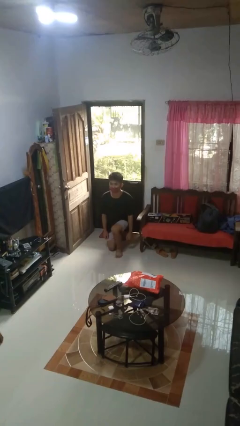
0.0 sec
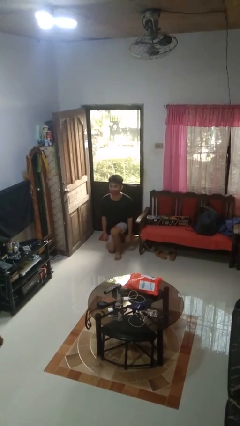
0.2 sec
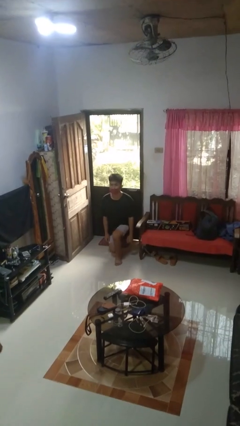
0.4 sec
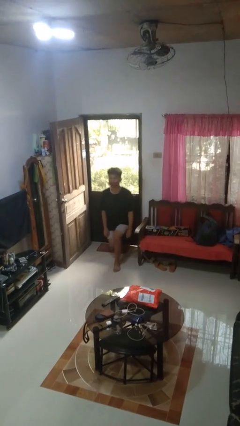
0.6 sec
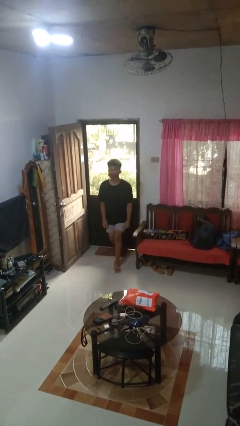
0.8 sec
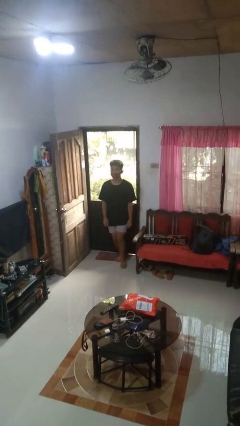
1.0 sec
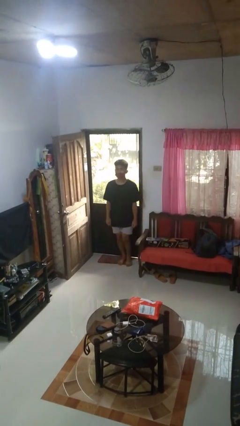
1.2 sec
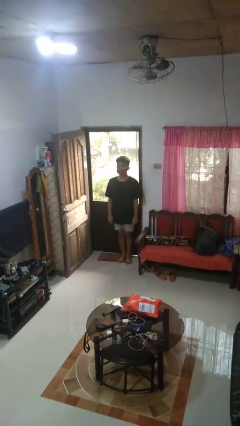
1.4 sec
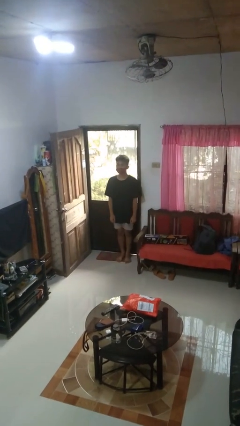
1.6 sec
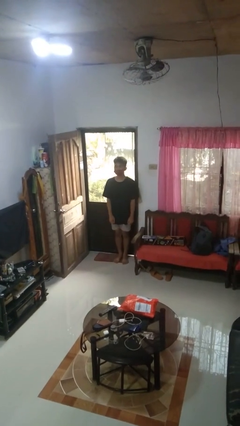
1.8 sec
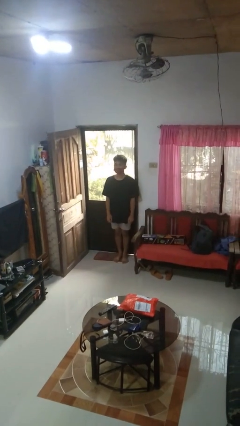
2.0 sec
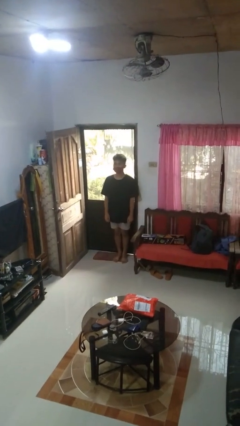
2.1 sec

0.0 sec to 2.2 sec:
person stands up from floor

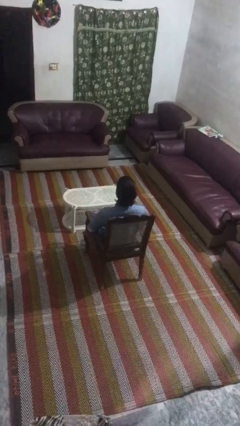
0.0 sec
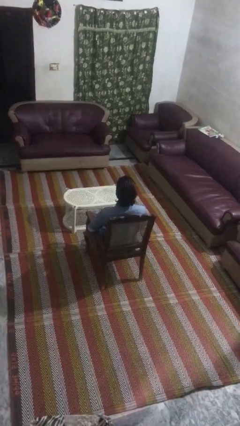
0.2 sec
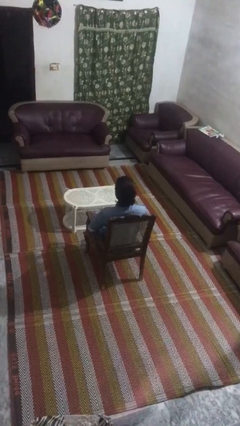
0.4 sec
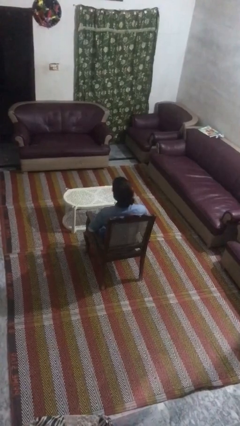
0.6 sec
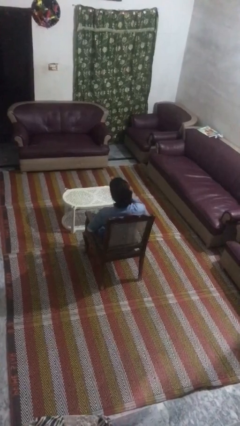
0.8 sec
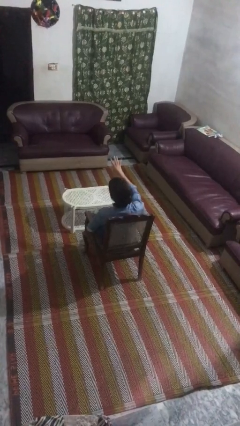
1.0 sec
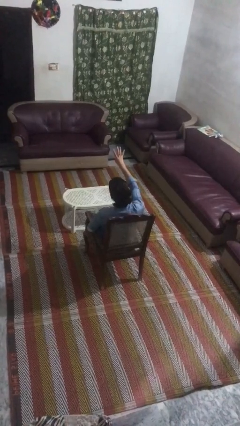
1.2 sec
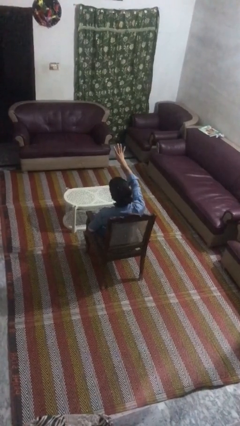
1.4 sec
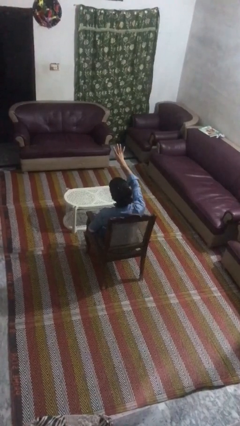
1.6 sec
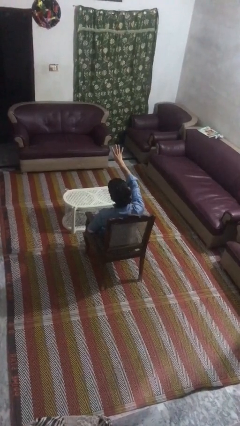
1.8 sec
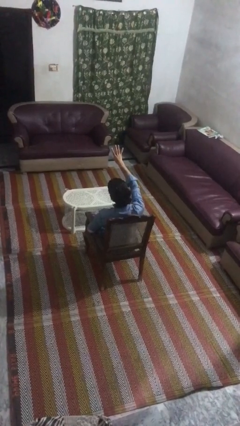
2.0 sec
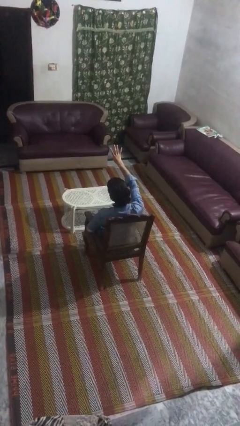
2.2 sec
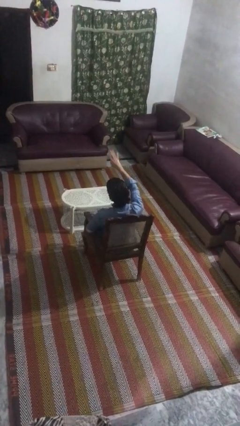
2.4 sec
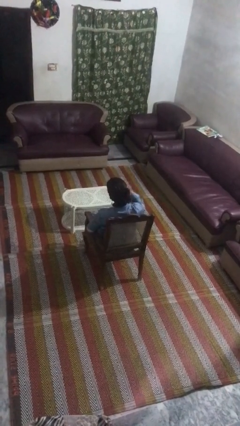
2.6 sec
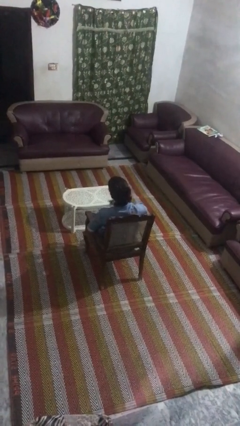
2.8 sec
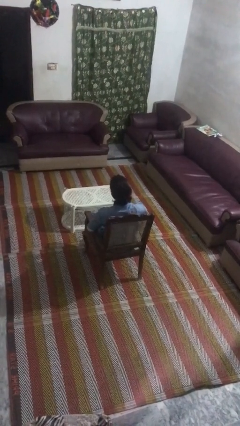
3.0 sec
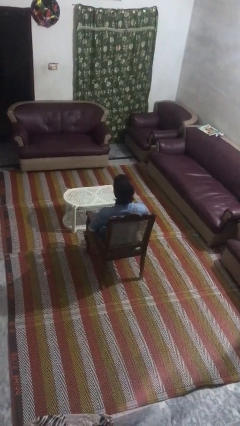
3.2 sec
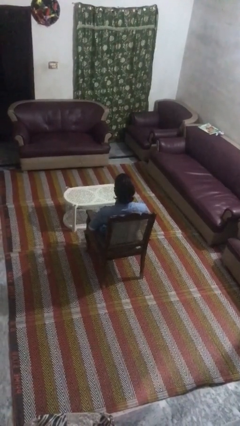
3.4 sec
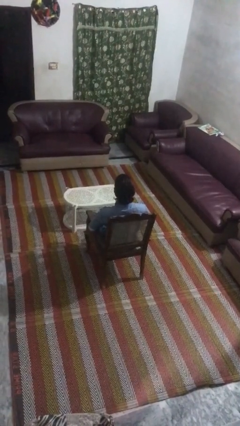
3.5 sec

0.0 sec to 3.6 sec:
person gestures number four

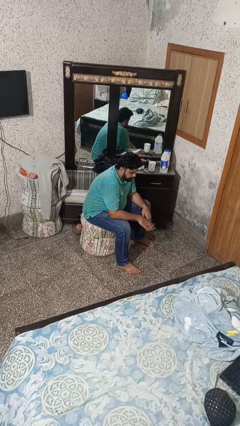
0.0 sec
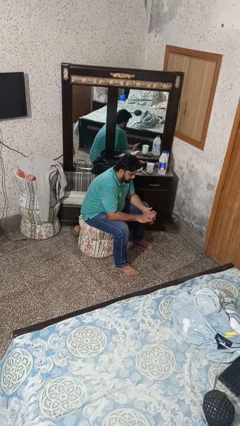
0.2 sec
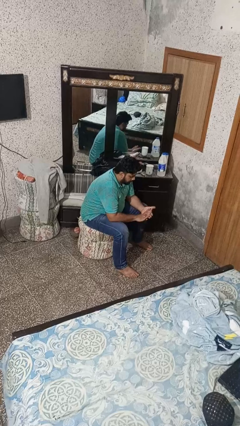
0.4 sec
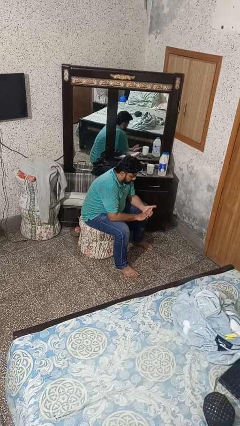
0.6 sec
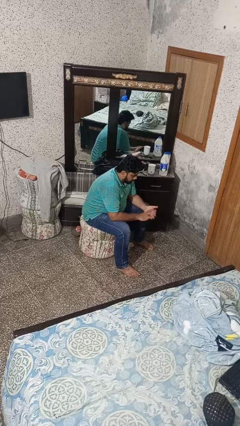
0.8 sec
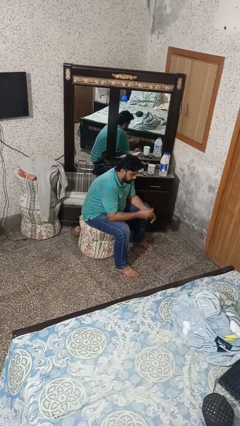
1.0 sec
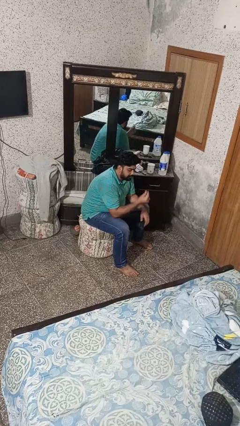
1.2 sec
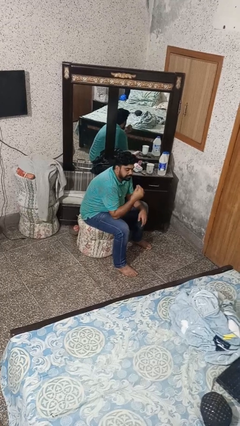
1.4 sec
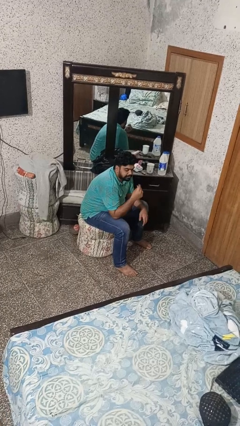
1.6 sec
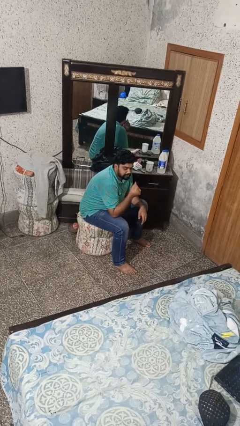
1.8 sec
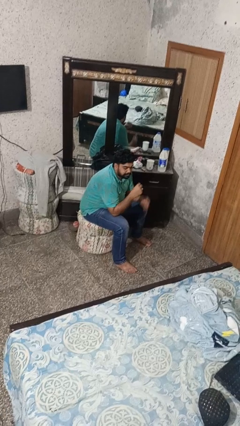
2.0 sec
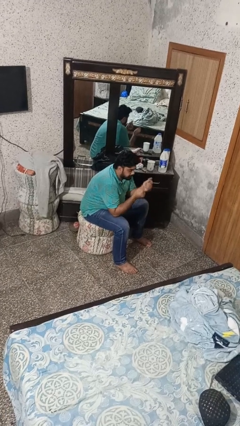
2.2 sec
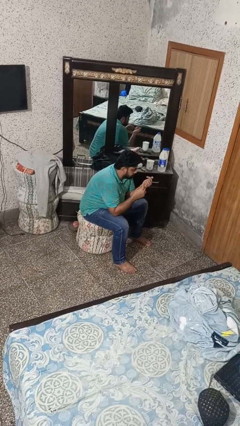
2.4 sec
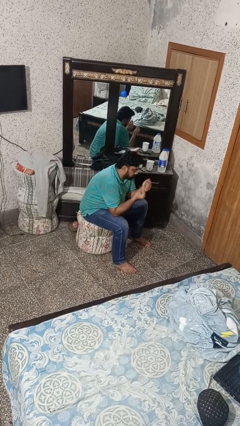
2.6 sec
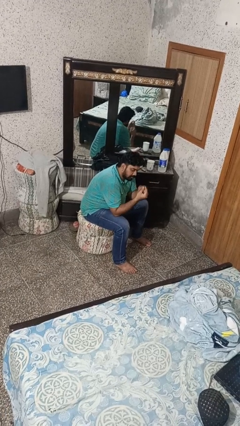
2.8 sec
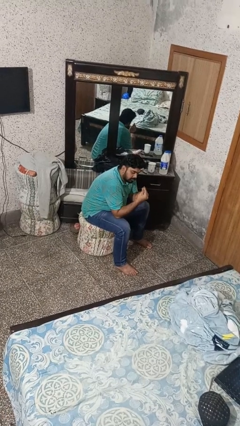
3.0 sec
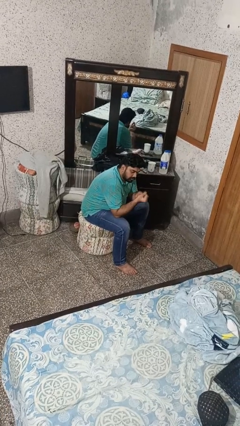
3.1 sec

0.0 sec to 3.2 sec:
person snaps fingers

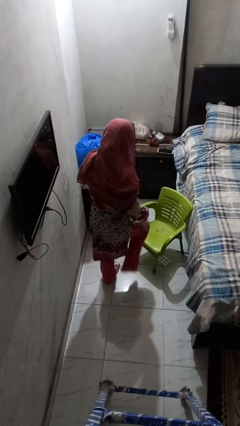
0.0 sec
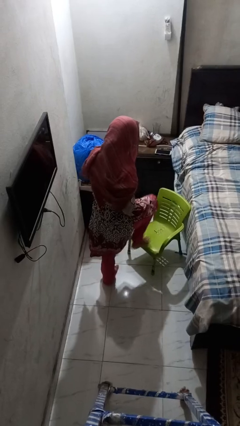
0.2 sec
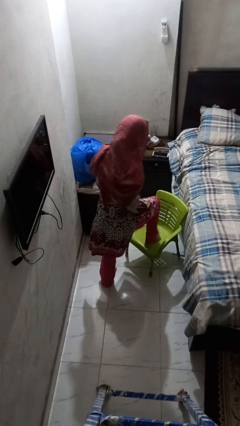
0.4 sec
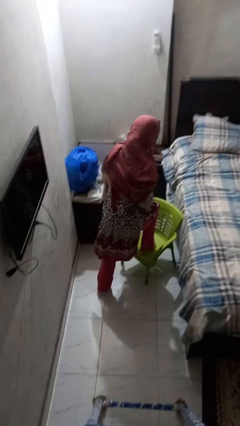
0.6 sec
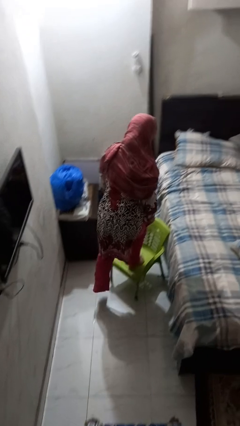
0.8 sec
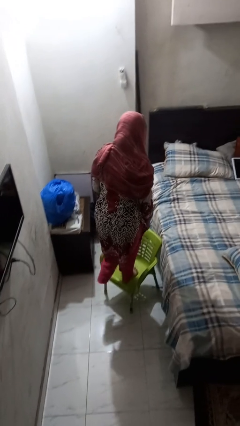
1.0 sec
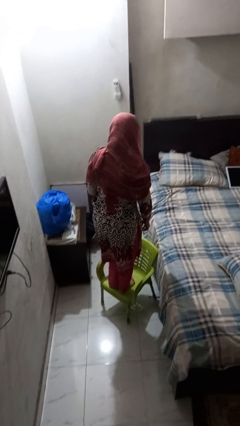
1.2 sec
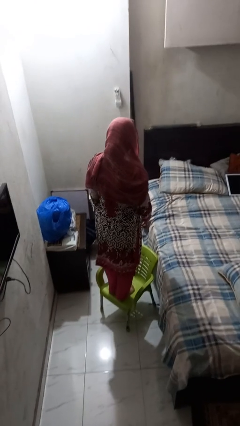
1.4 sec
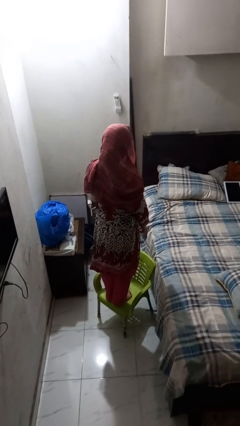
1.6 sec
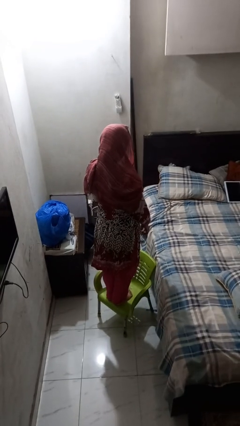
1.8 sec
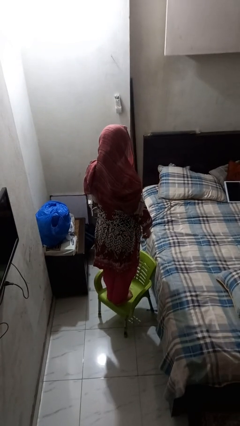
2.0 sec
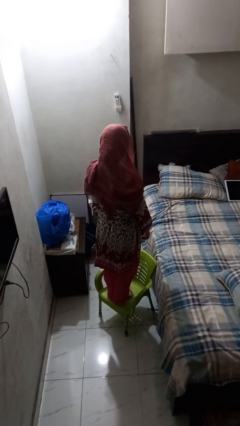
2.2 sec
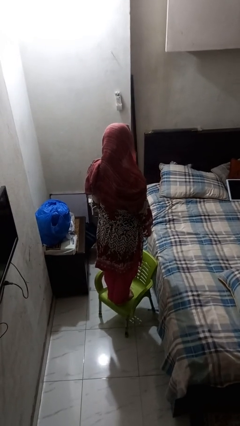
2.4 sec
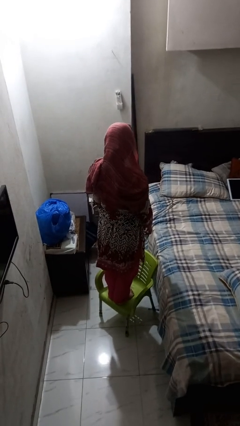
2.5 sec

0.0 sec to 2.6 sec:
person climbs on chair

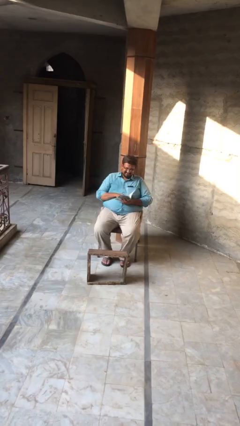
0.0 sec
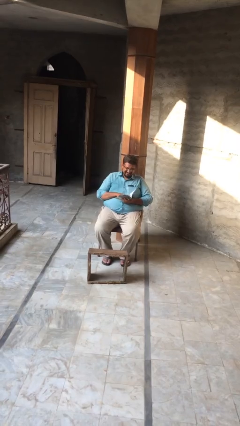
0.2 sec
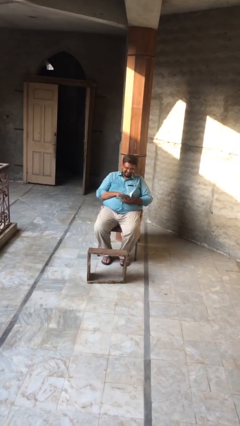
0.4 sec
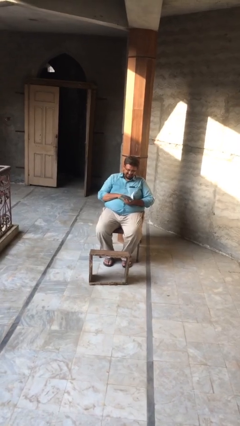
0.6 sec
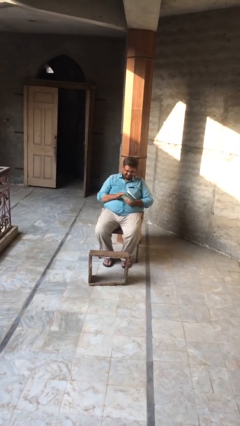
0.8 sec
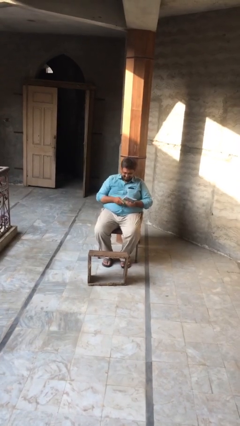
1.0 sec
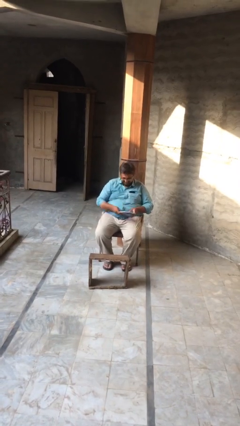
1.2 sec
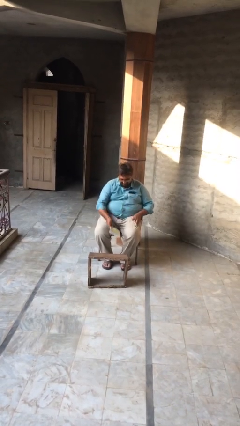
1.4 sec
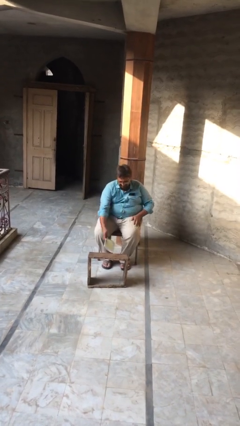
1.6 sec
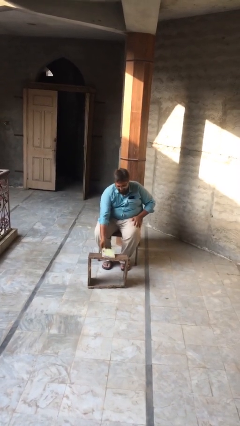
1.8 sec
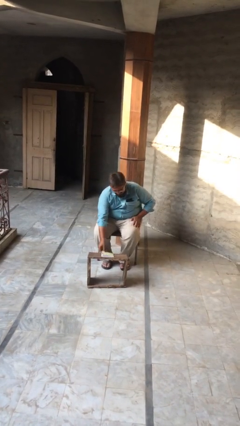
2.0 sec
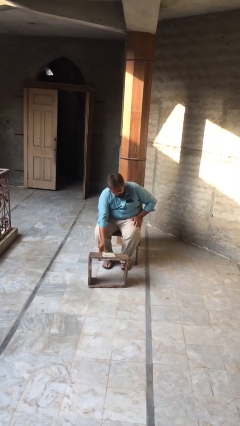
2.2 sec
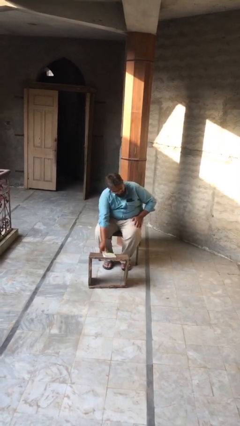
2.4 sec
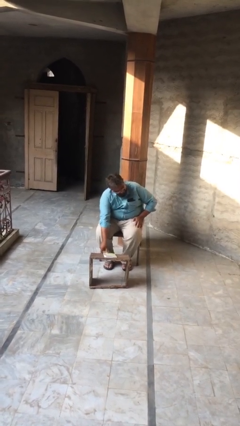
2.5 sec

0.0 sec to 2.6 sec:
person puts down object on table

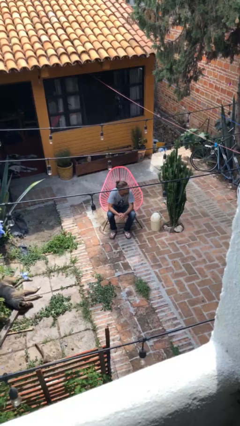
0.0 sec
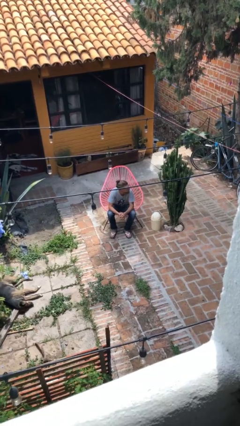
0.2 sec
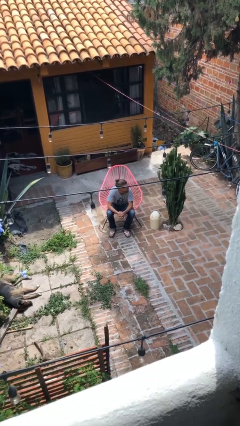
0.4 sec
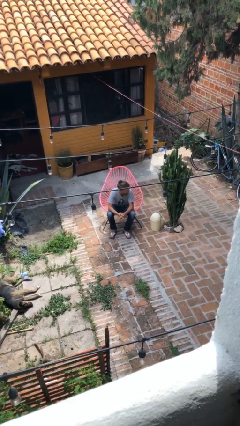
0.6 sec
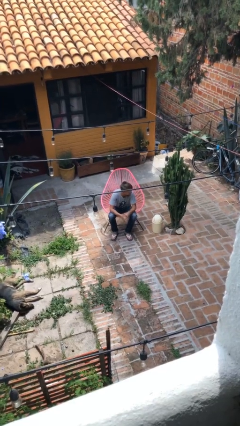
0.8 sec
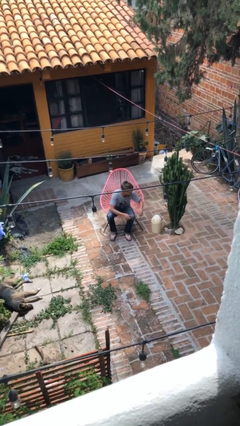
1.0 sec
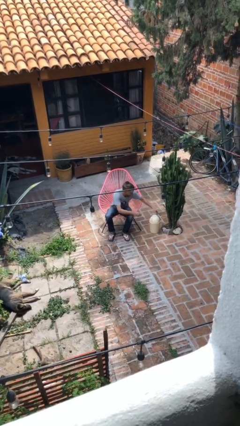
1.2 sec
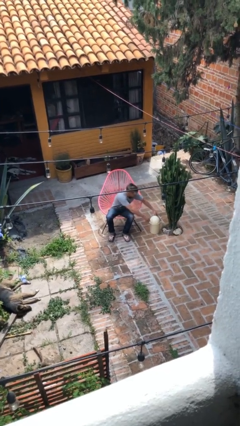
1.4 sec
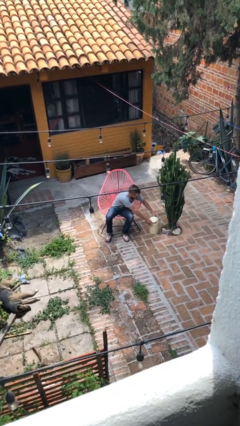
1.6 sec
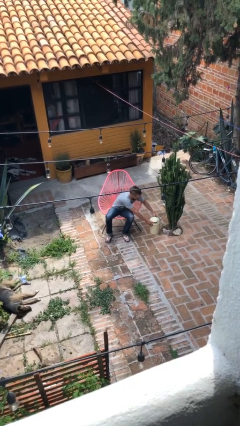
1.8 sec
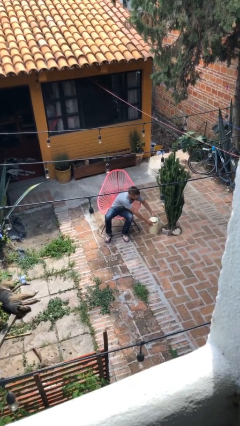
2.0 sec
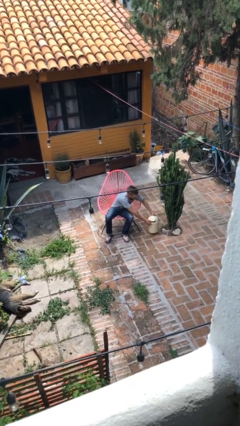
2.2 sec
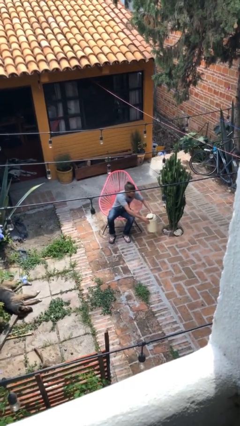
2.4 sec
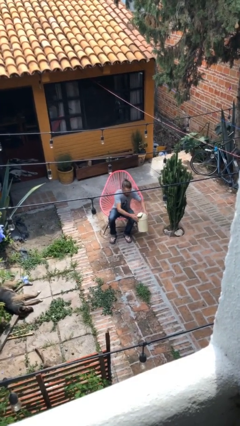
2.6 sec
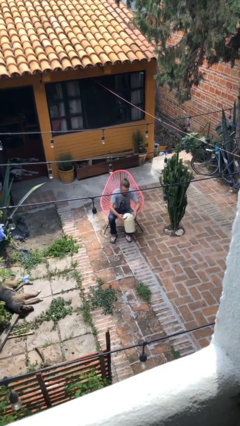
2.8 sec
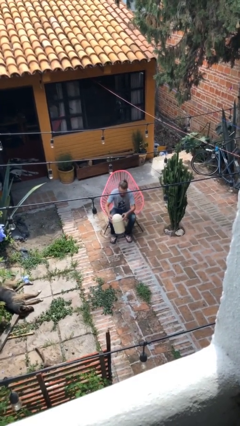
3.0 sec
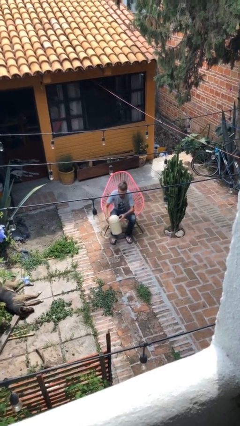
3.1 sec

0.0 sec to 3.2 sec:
person picks up object from floor
